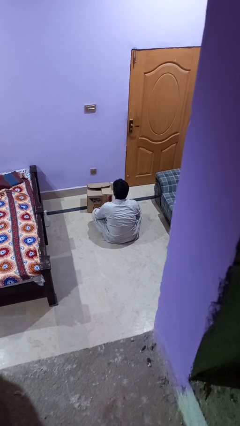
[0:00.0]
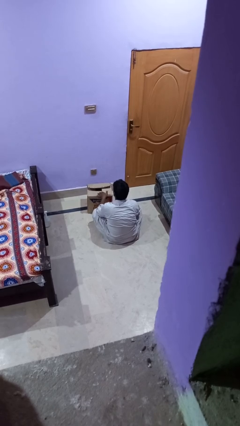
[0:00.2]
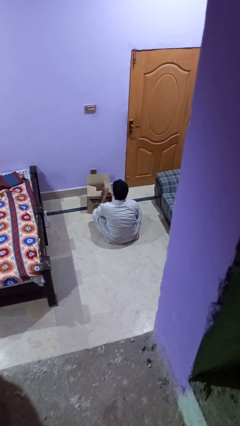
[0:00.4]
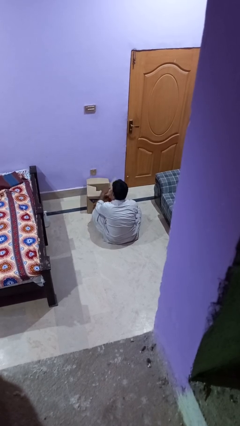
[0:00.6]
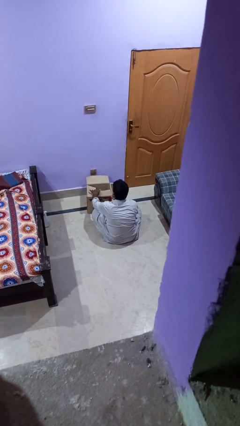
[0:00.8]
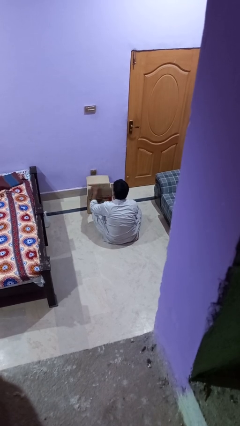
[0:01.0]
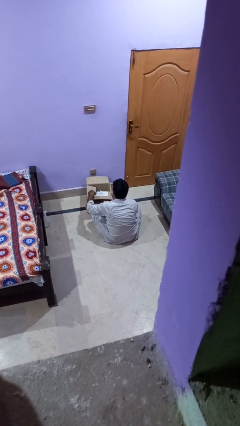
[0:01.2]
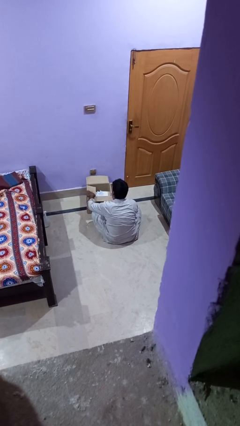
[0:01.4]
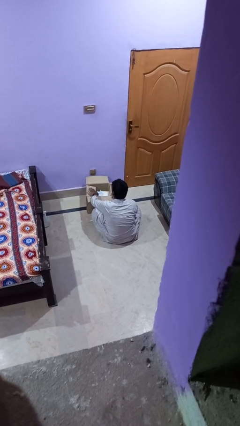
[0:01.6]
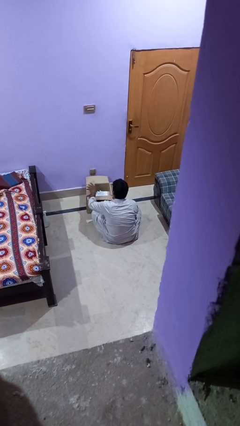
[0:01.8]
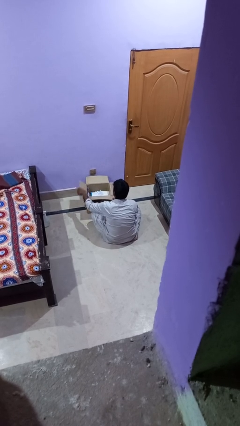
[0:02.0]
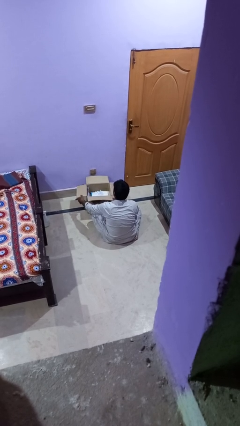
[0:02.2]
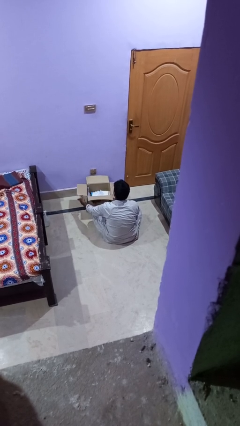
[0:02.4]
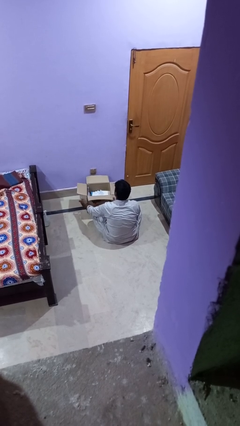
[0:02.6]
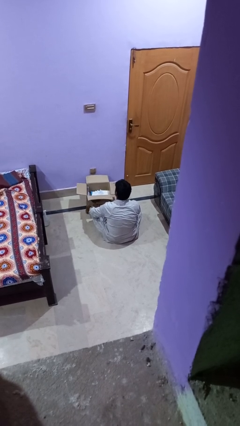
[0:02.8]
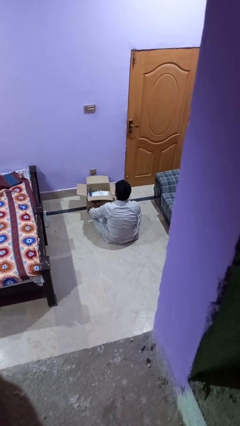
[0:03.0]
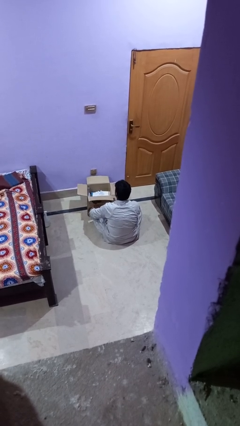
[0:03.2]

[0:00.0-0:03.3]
person opens box

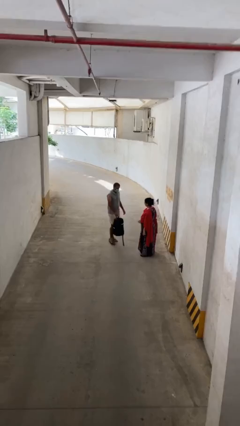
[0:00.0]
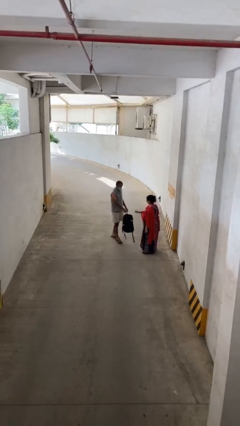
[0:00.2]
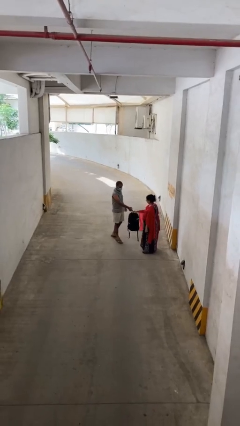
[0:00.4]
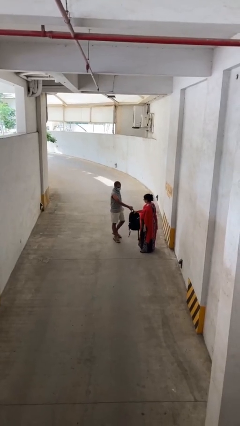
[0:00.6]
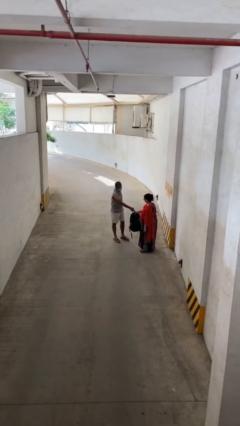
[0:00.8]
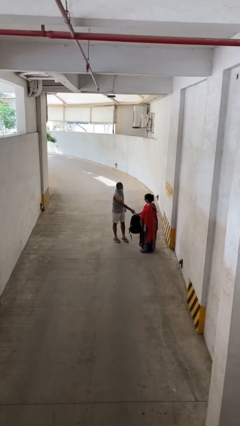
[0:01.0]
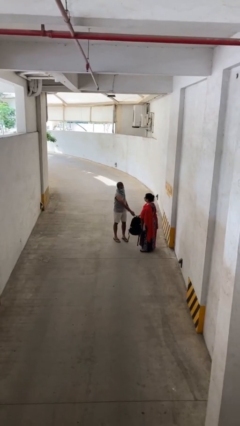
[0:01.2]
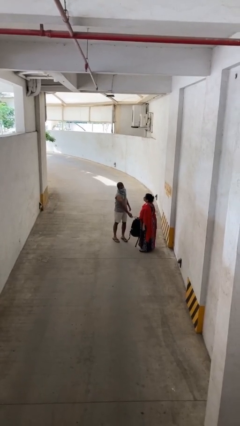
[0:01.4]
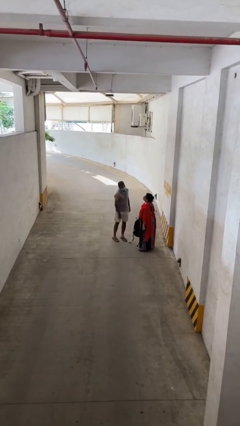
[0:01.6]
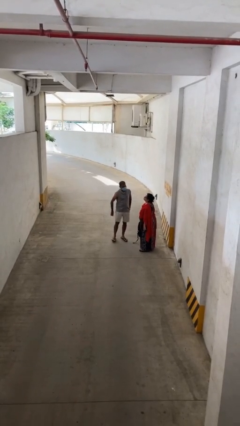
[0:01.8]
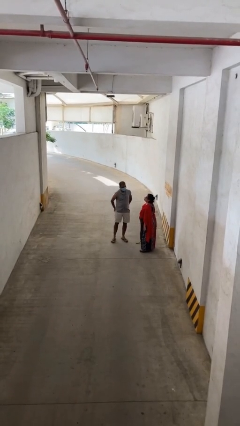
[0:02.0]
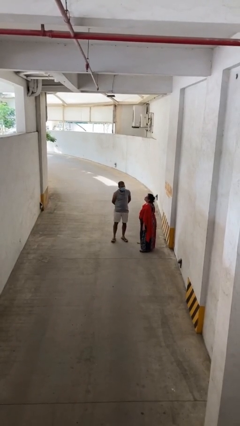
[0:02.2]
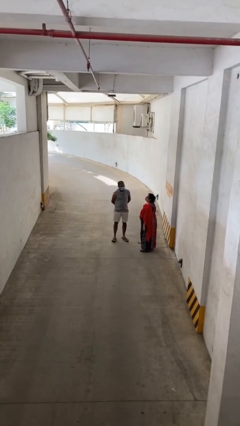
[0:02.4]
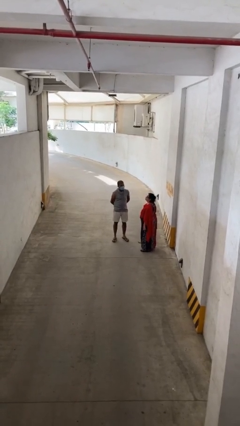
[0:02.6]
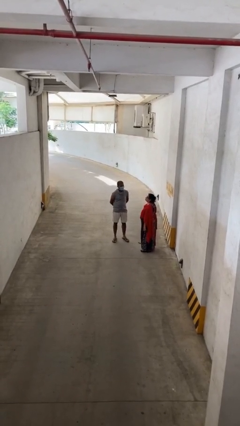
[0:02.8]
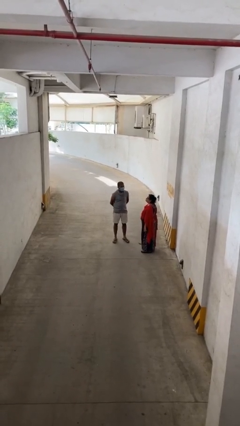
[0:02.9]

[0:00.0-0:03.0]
person transfers object to person

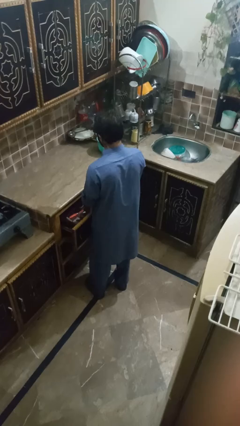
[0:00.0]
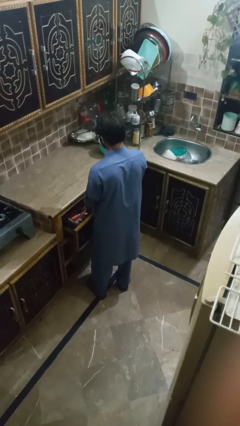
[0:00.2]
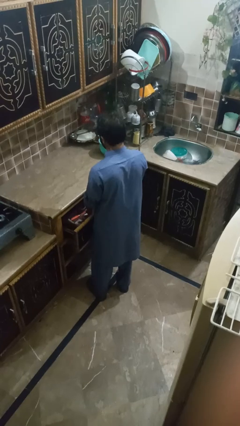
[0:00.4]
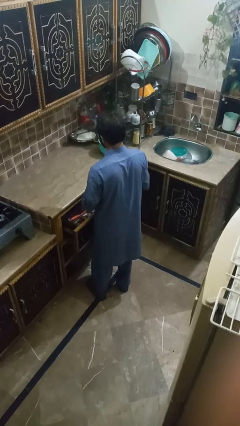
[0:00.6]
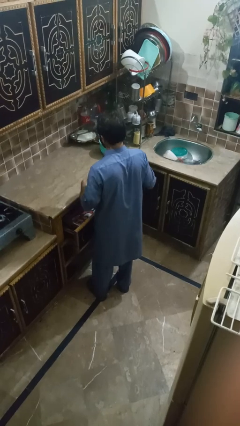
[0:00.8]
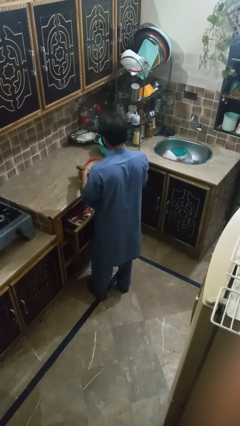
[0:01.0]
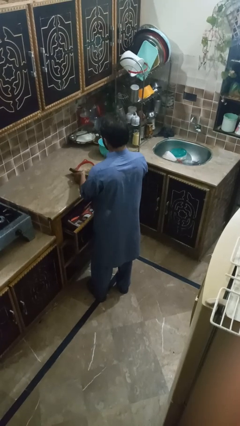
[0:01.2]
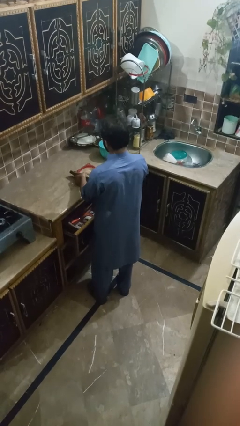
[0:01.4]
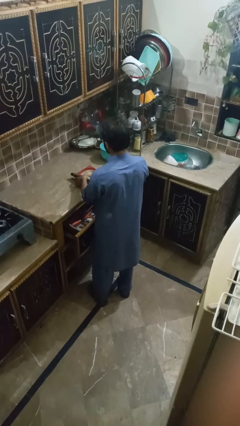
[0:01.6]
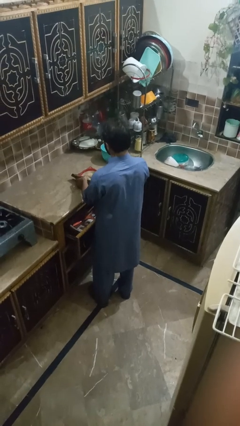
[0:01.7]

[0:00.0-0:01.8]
person takes object from kitchen drawer

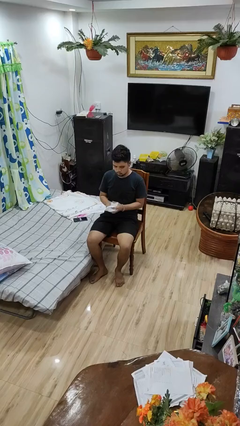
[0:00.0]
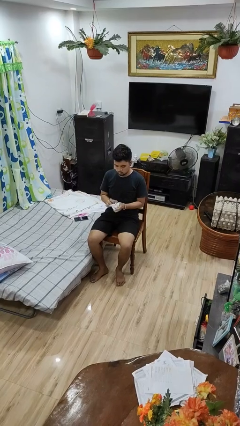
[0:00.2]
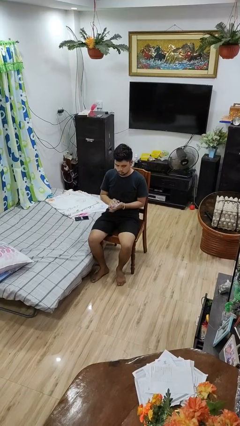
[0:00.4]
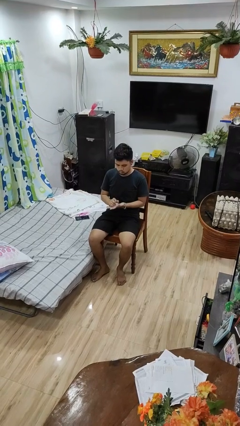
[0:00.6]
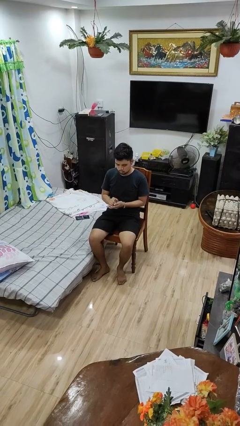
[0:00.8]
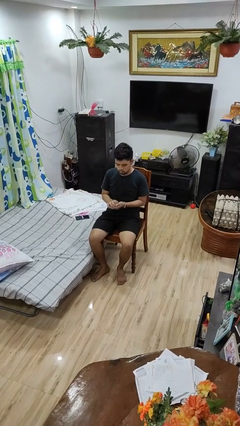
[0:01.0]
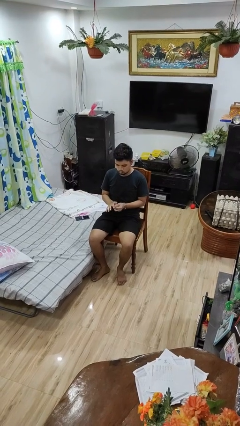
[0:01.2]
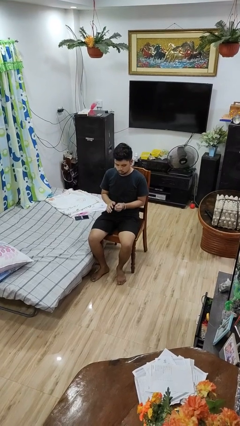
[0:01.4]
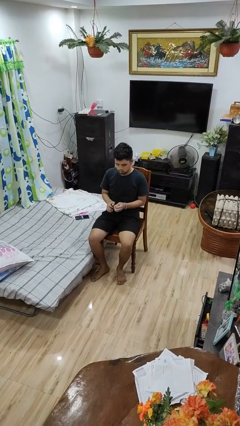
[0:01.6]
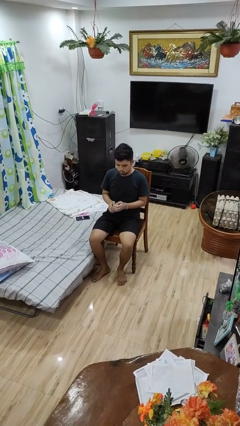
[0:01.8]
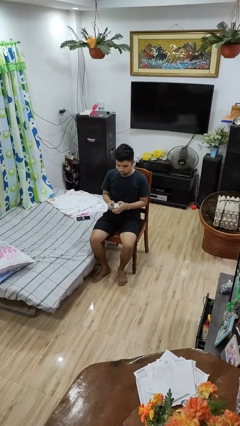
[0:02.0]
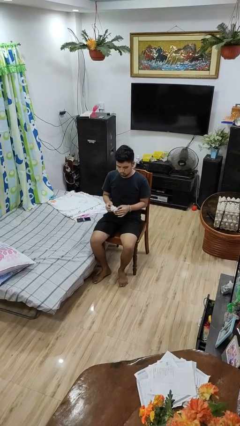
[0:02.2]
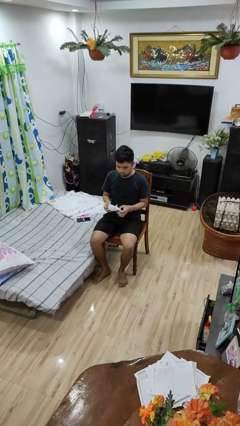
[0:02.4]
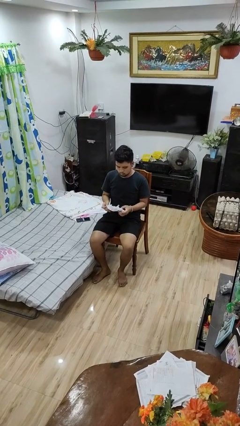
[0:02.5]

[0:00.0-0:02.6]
person crumples paper

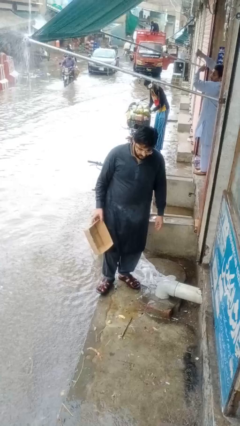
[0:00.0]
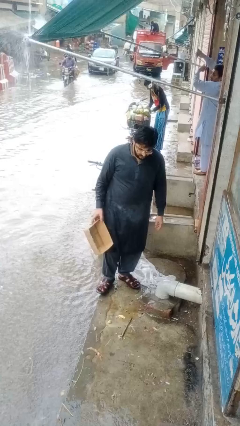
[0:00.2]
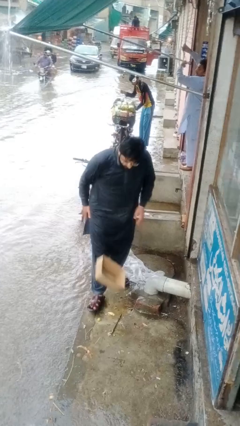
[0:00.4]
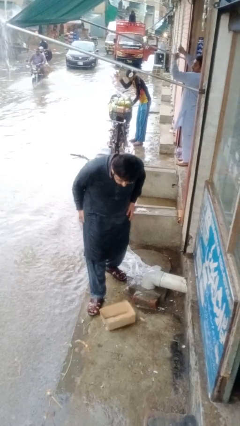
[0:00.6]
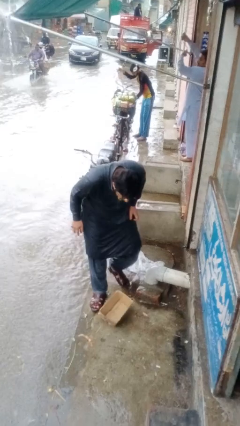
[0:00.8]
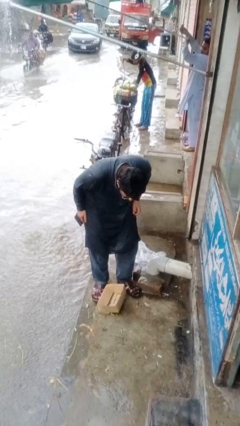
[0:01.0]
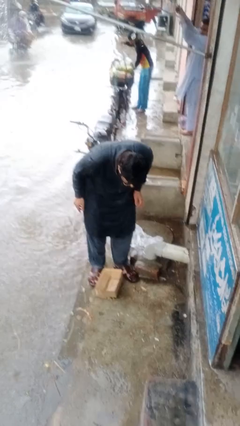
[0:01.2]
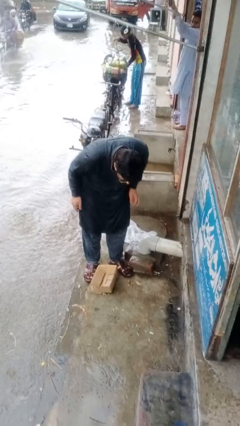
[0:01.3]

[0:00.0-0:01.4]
person drops object

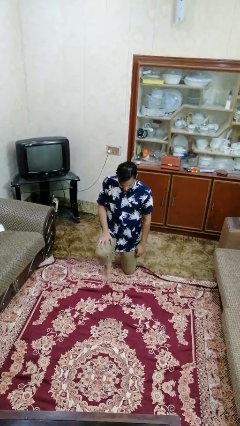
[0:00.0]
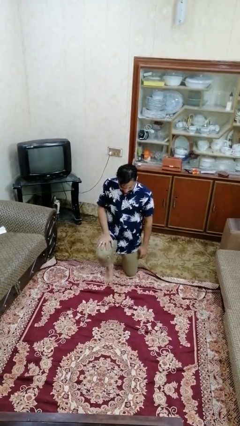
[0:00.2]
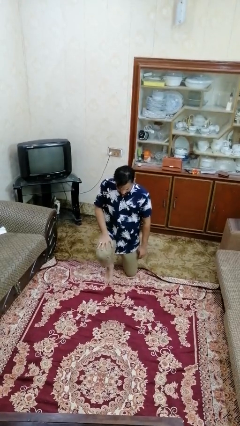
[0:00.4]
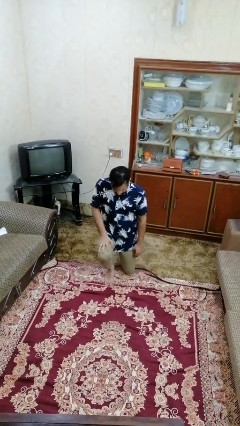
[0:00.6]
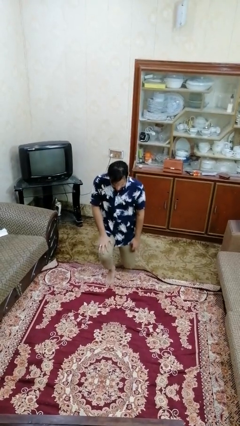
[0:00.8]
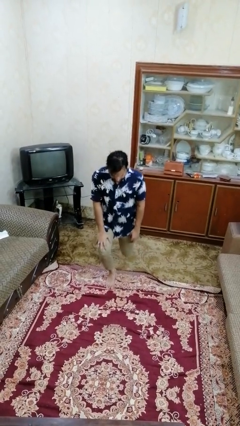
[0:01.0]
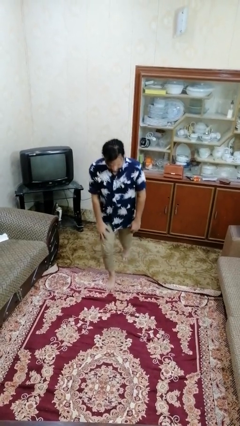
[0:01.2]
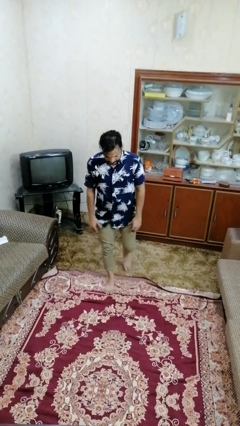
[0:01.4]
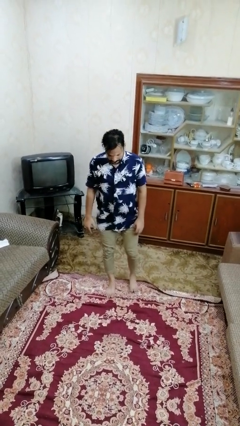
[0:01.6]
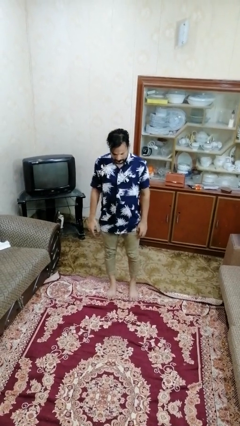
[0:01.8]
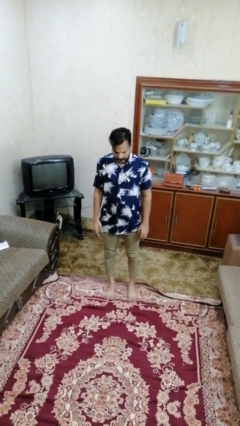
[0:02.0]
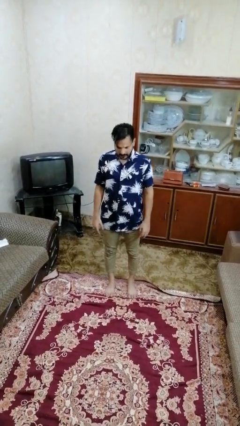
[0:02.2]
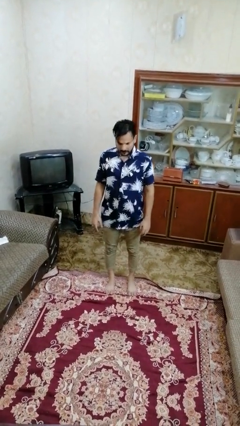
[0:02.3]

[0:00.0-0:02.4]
person stands up from floor

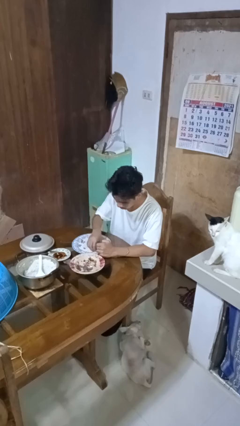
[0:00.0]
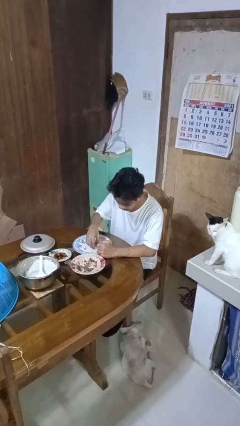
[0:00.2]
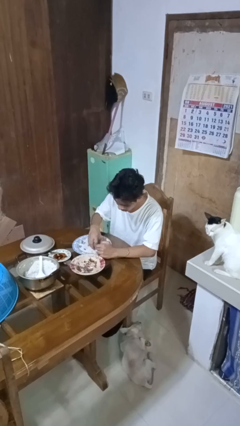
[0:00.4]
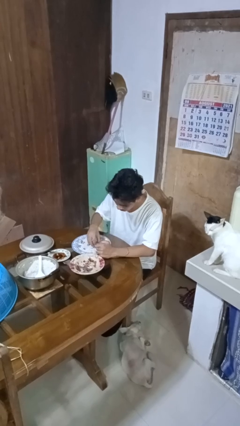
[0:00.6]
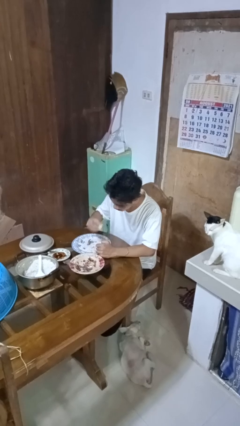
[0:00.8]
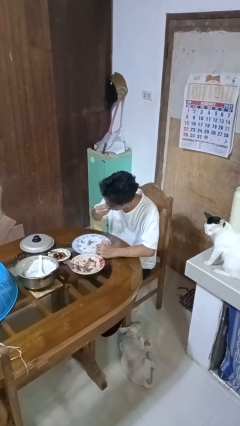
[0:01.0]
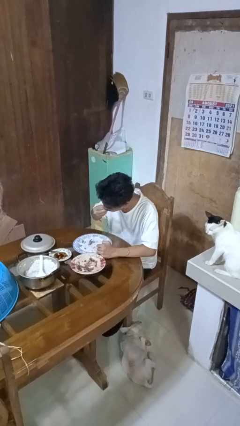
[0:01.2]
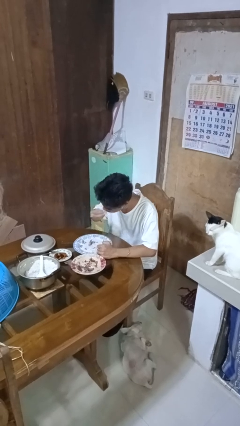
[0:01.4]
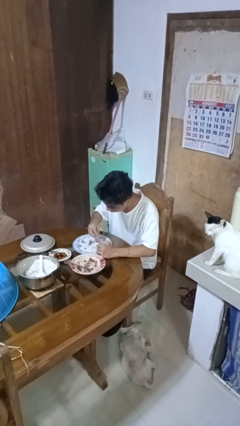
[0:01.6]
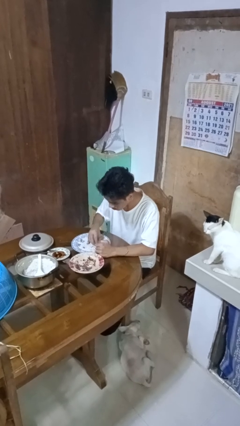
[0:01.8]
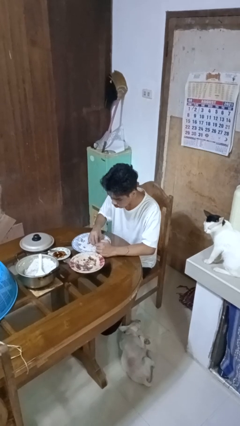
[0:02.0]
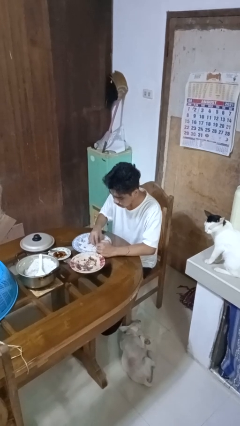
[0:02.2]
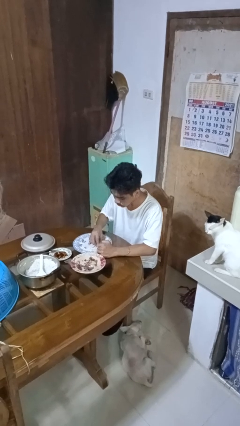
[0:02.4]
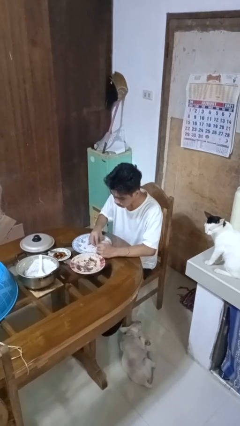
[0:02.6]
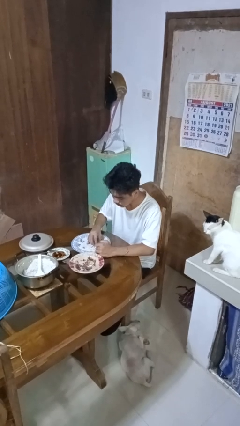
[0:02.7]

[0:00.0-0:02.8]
person eats with hands
